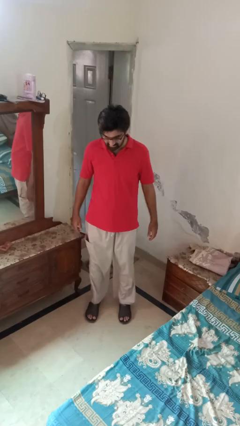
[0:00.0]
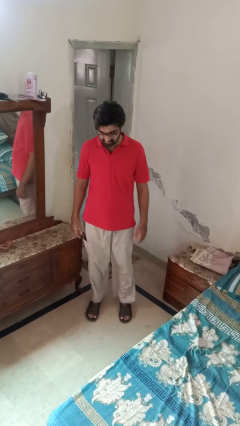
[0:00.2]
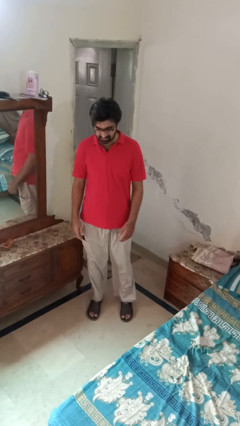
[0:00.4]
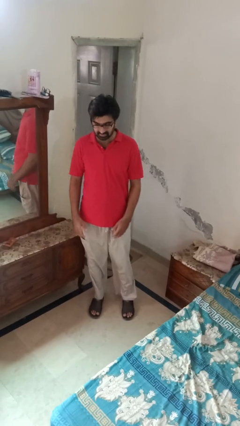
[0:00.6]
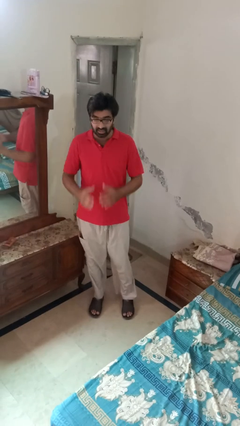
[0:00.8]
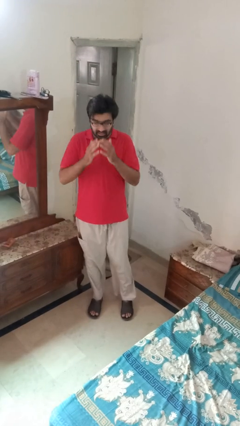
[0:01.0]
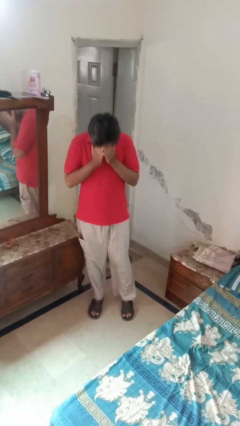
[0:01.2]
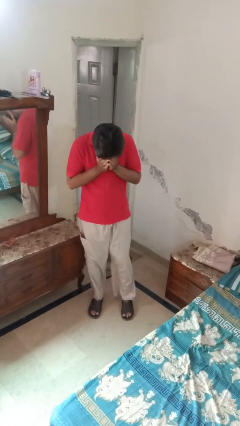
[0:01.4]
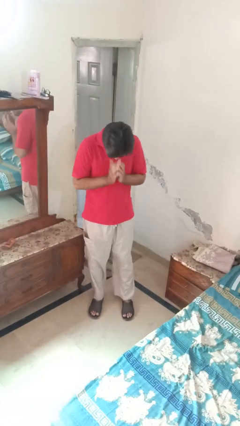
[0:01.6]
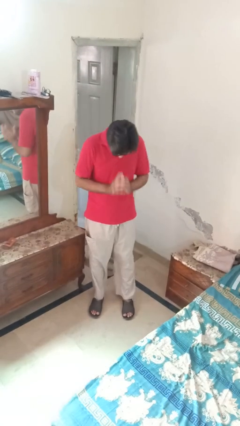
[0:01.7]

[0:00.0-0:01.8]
person sneezes into hand

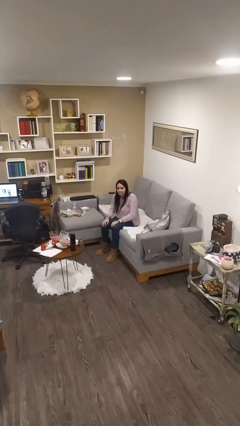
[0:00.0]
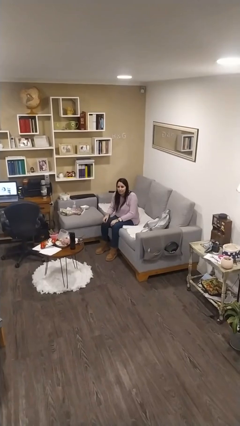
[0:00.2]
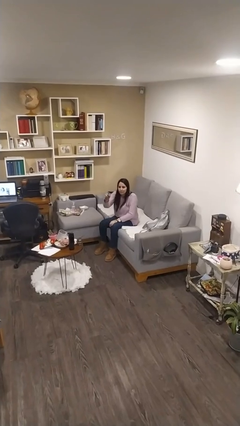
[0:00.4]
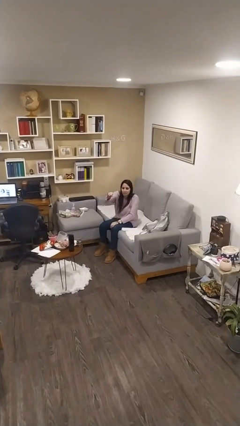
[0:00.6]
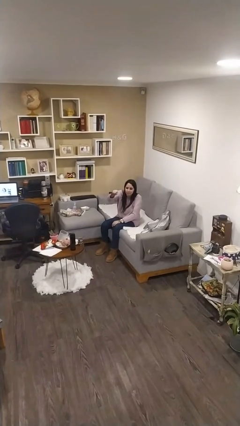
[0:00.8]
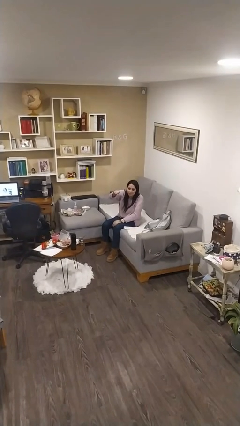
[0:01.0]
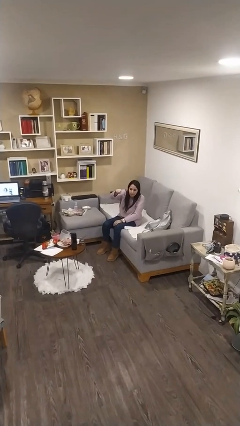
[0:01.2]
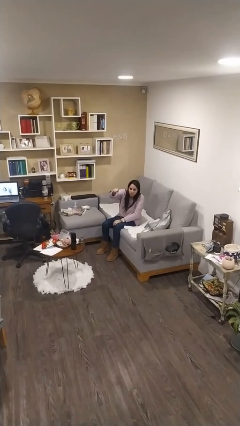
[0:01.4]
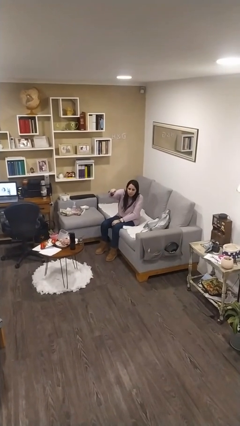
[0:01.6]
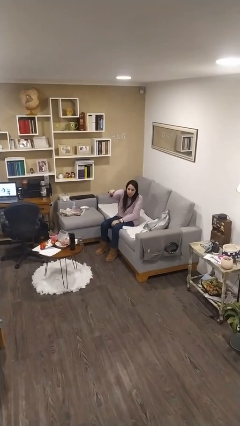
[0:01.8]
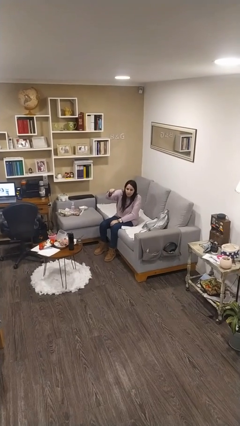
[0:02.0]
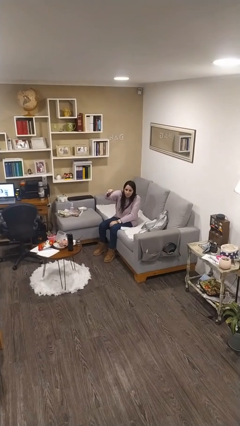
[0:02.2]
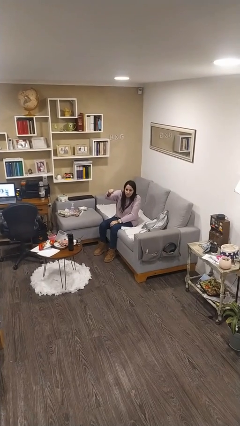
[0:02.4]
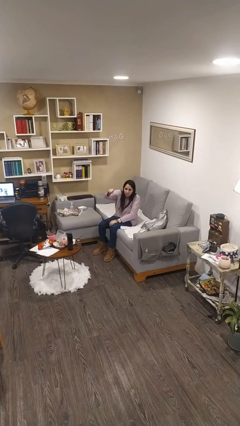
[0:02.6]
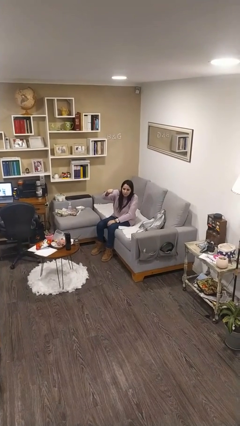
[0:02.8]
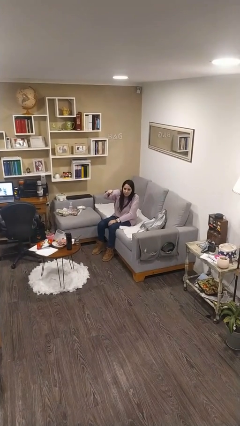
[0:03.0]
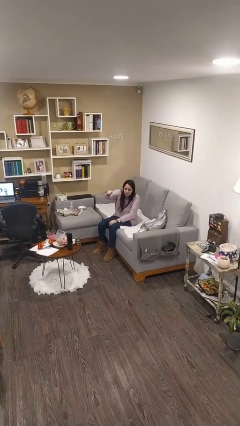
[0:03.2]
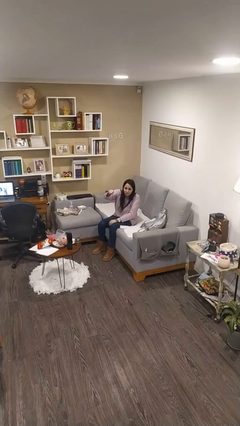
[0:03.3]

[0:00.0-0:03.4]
person points at person

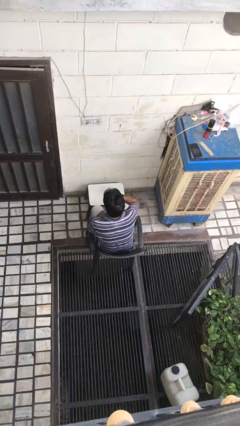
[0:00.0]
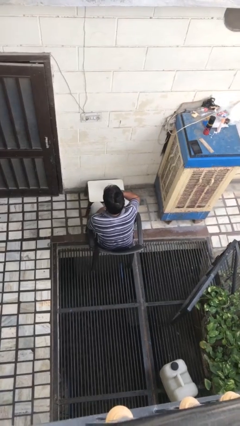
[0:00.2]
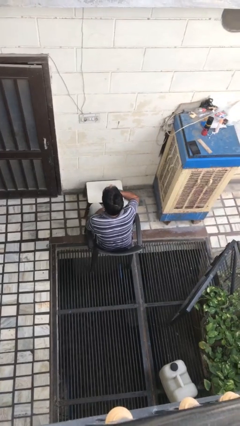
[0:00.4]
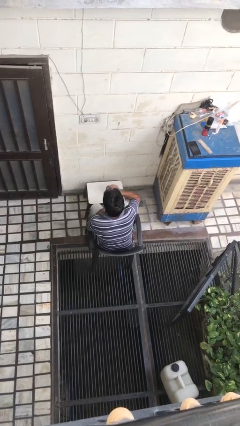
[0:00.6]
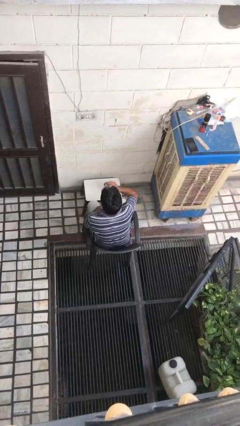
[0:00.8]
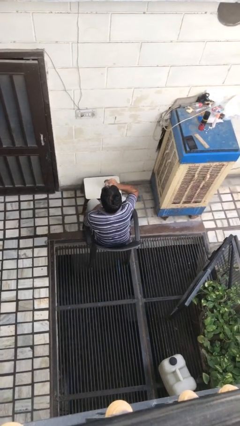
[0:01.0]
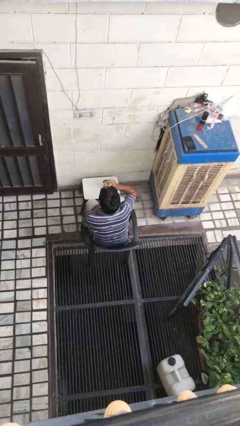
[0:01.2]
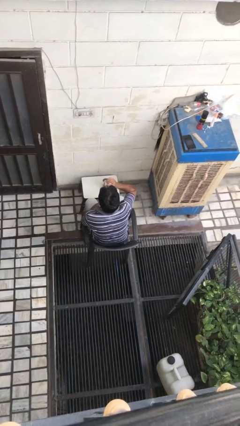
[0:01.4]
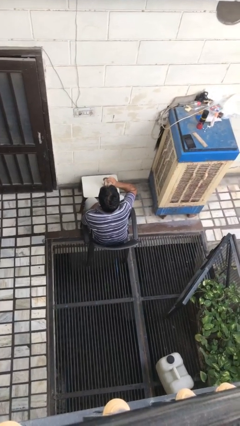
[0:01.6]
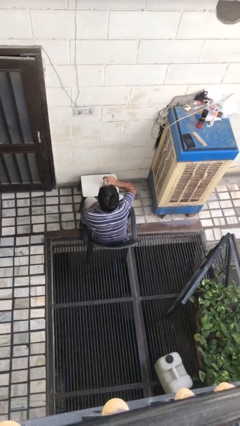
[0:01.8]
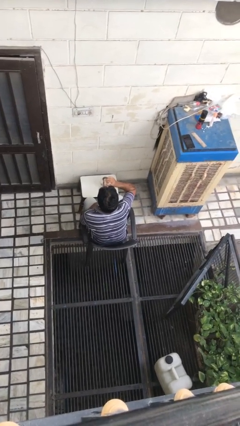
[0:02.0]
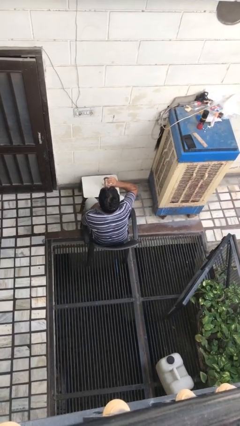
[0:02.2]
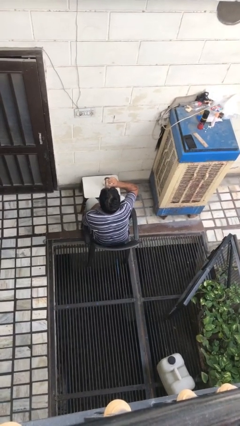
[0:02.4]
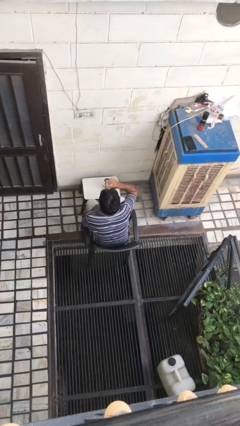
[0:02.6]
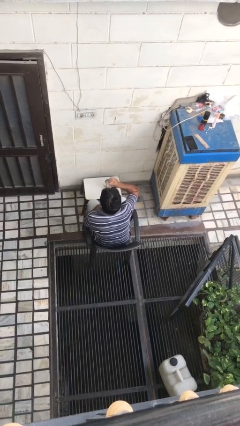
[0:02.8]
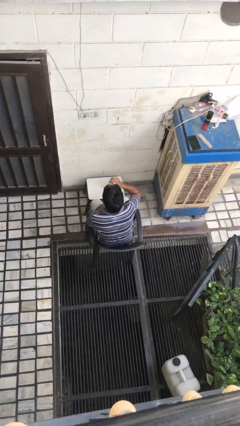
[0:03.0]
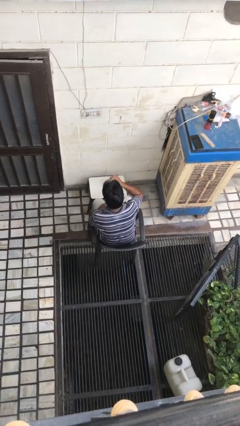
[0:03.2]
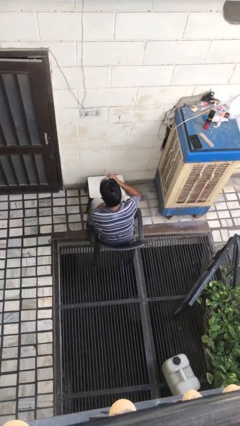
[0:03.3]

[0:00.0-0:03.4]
person drinks from shotglass

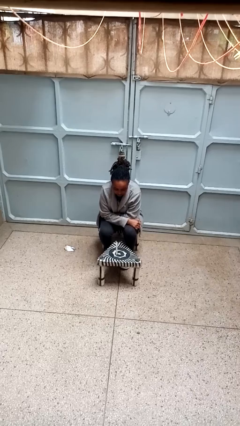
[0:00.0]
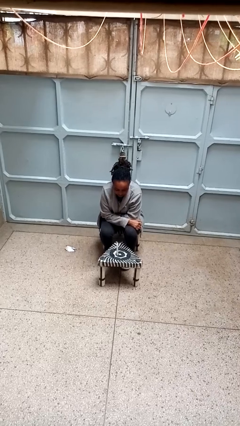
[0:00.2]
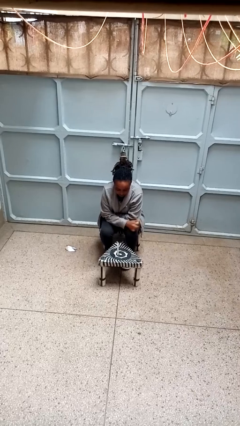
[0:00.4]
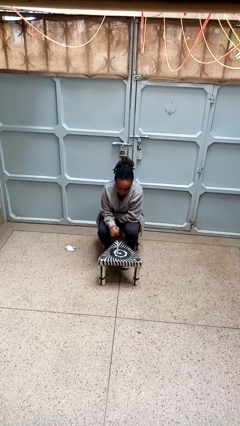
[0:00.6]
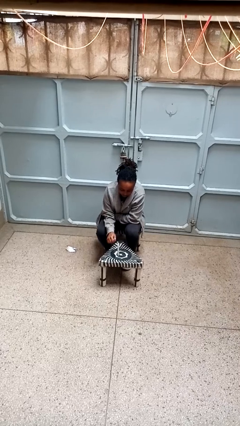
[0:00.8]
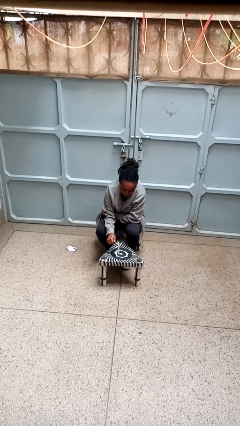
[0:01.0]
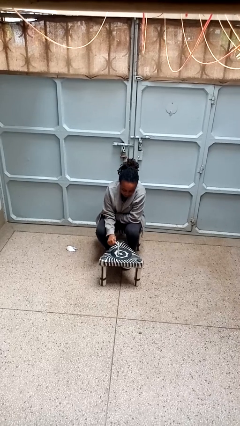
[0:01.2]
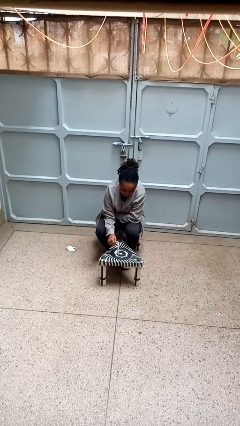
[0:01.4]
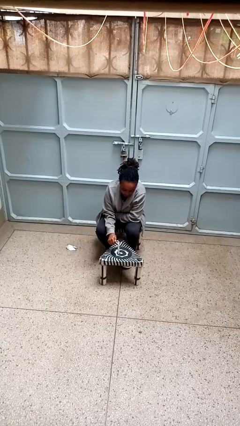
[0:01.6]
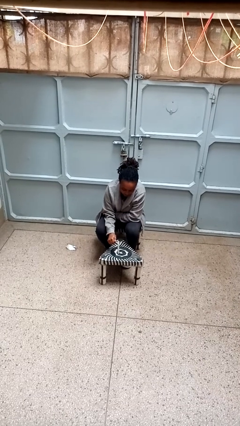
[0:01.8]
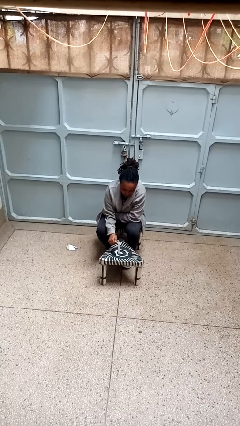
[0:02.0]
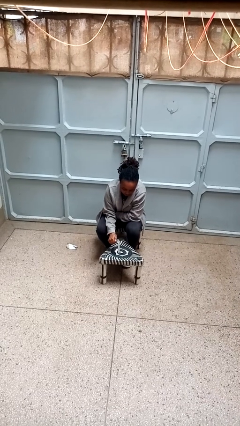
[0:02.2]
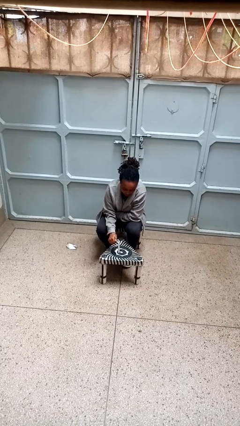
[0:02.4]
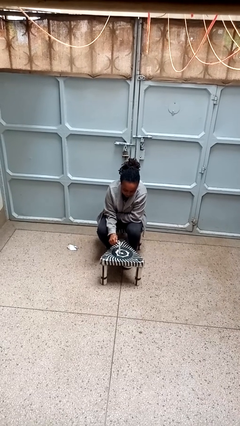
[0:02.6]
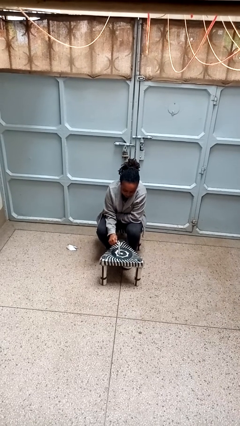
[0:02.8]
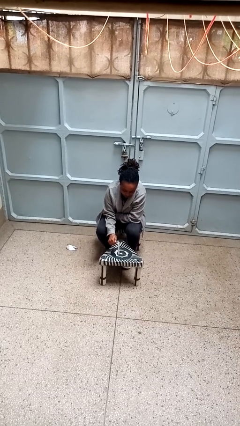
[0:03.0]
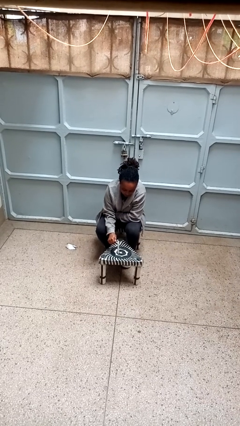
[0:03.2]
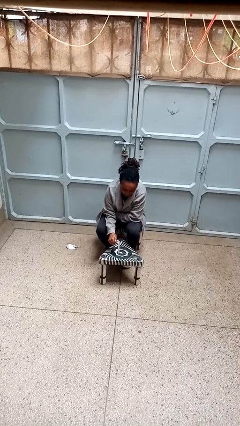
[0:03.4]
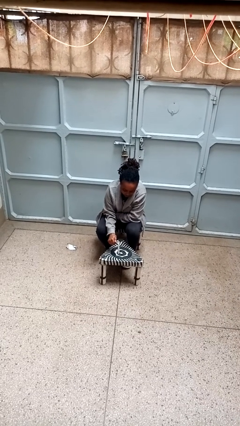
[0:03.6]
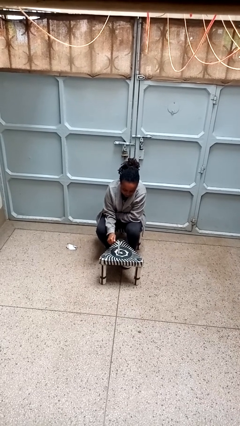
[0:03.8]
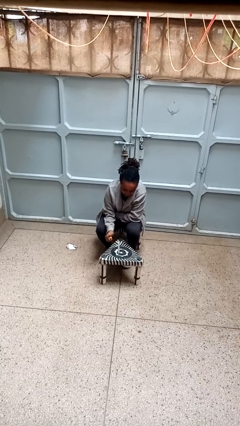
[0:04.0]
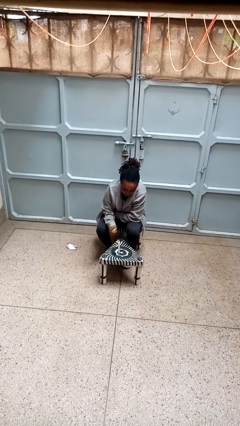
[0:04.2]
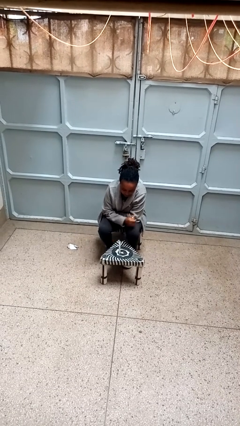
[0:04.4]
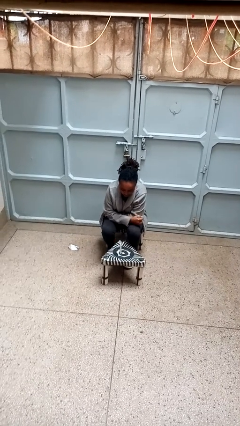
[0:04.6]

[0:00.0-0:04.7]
person lights candle

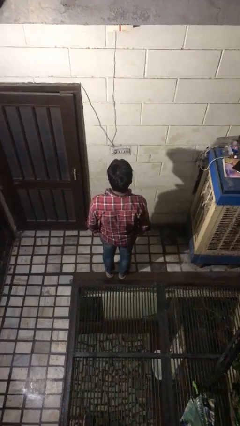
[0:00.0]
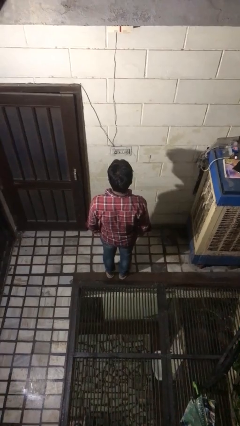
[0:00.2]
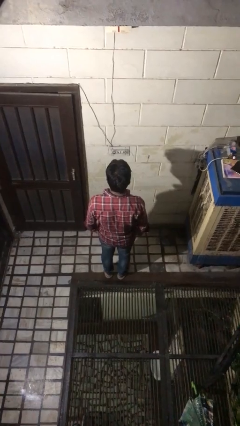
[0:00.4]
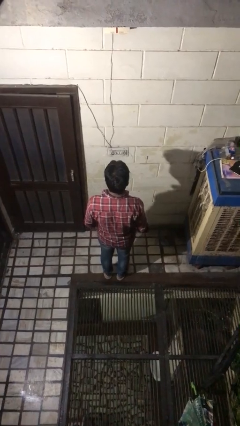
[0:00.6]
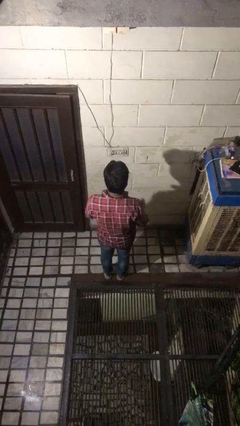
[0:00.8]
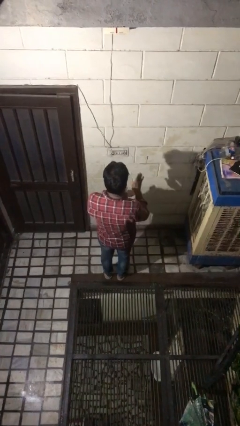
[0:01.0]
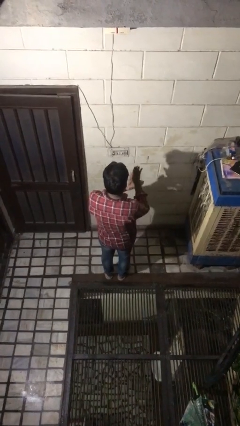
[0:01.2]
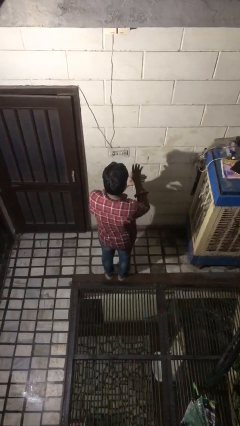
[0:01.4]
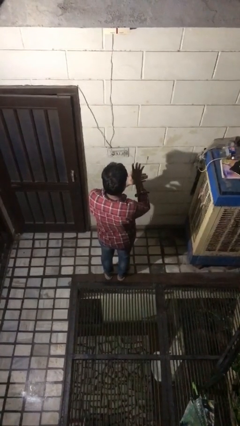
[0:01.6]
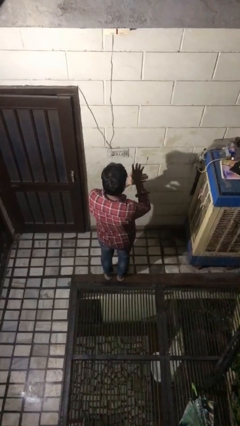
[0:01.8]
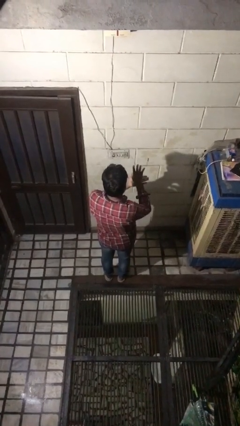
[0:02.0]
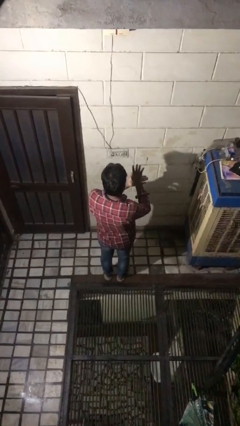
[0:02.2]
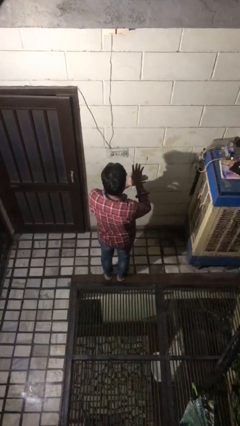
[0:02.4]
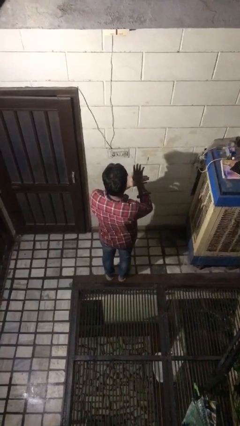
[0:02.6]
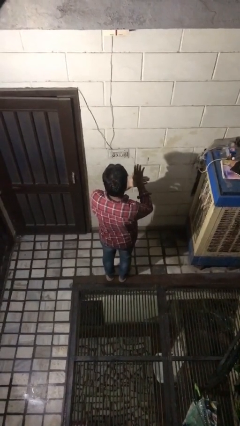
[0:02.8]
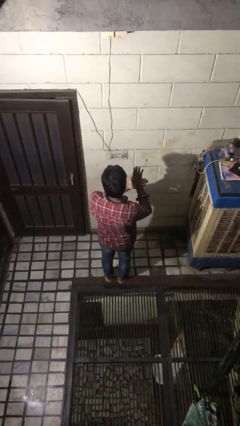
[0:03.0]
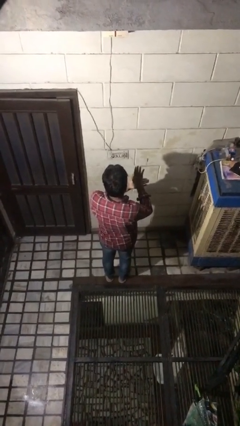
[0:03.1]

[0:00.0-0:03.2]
person gestures number four

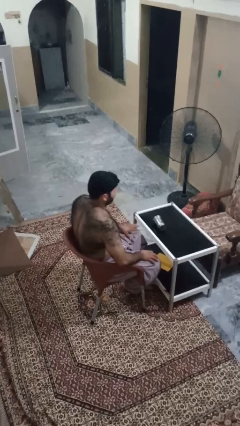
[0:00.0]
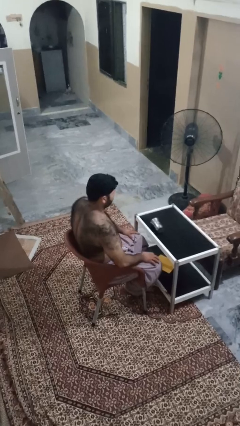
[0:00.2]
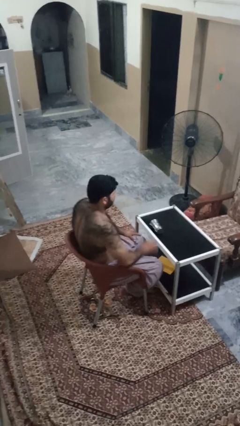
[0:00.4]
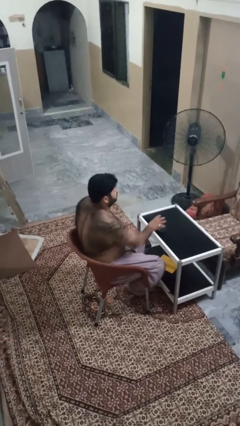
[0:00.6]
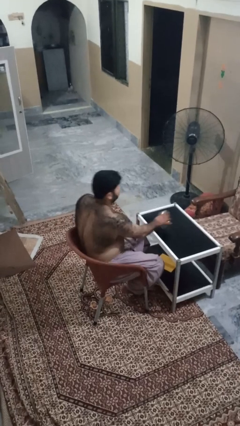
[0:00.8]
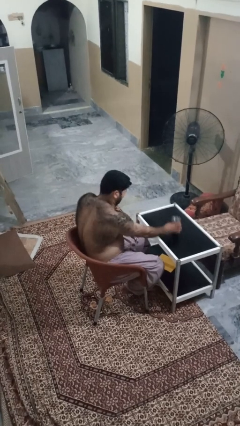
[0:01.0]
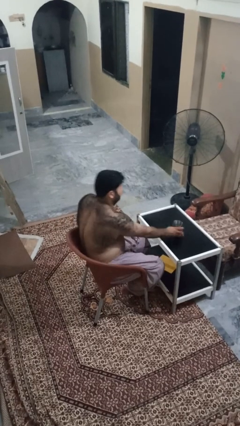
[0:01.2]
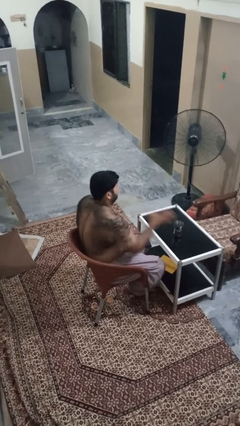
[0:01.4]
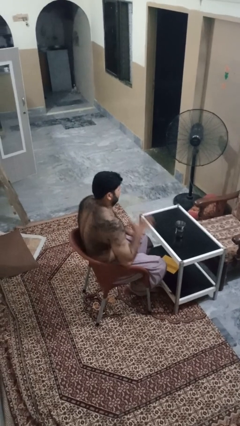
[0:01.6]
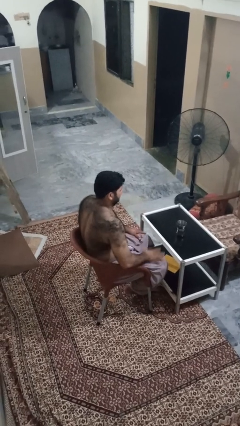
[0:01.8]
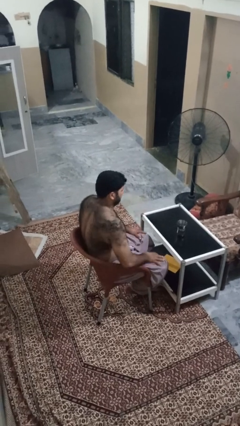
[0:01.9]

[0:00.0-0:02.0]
person sets upright glass
